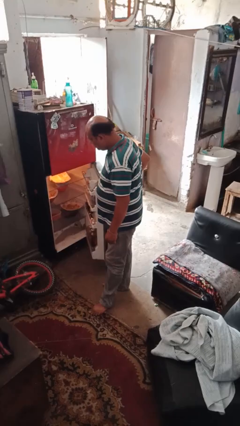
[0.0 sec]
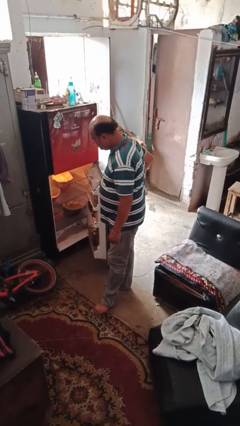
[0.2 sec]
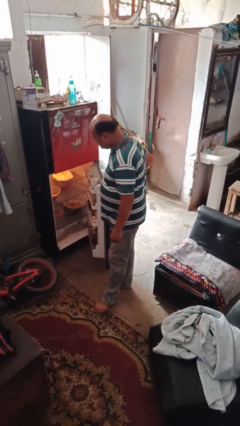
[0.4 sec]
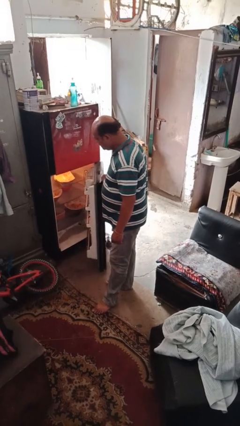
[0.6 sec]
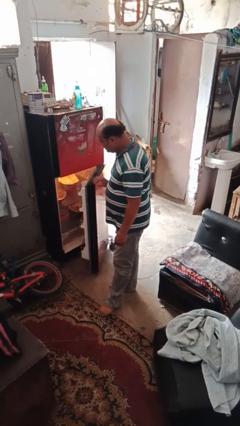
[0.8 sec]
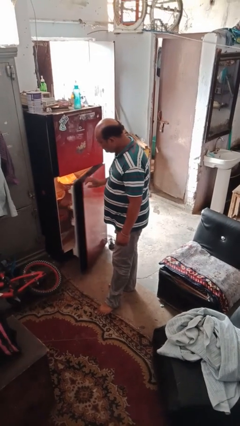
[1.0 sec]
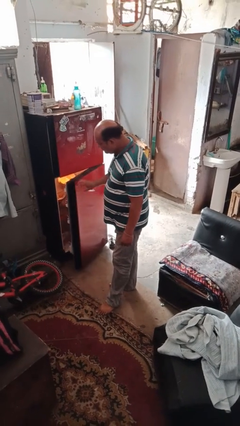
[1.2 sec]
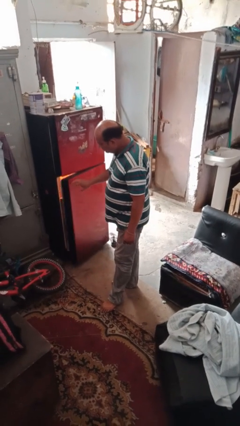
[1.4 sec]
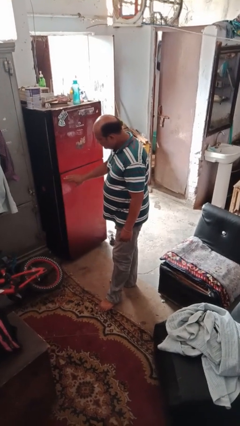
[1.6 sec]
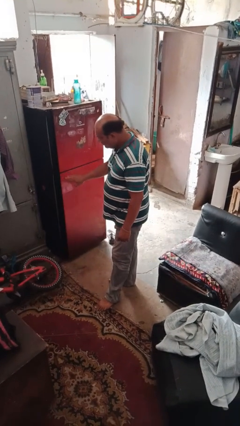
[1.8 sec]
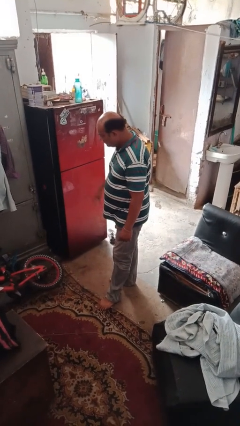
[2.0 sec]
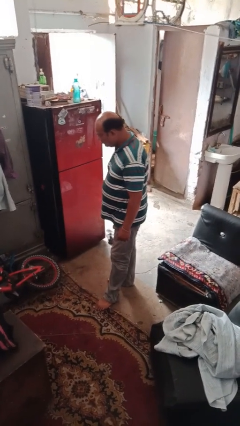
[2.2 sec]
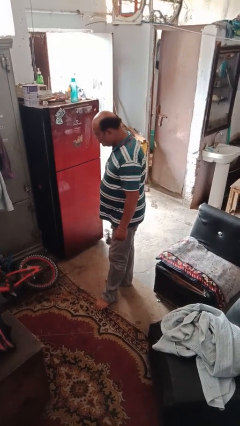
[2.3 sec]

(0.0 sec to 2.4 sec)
person closes refrigerator

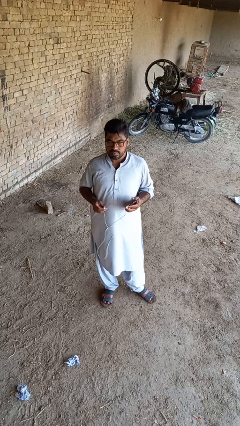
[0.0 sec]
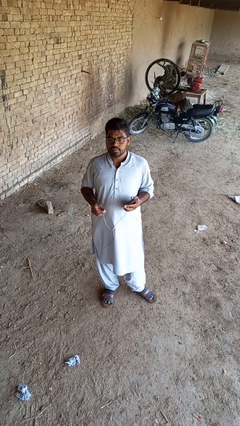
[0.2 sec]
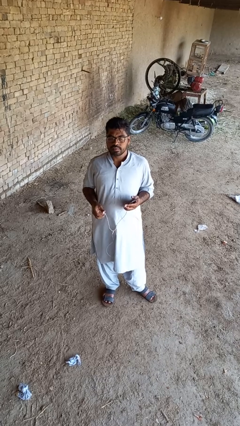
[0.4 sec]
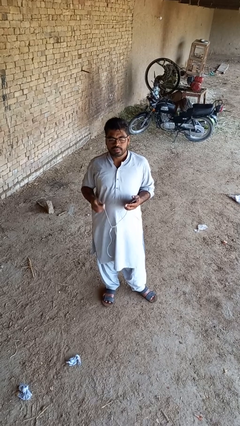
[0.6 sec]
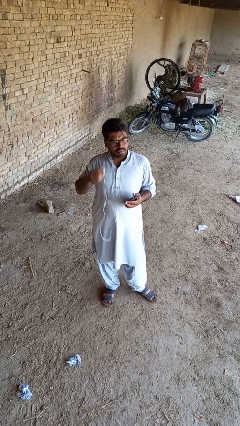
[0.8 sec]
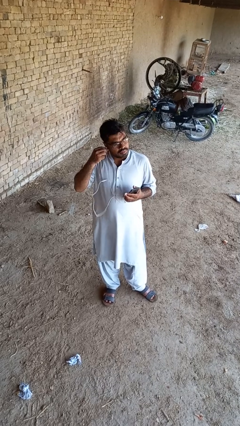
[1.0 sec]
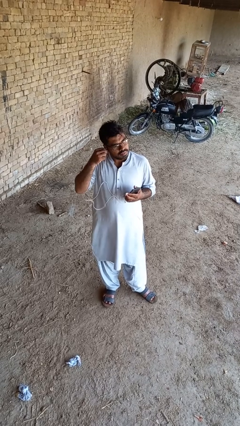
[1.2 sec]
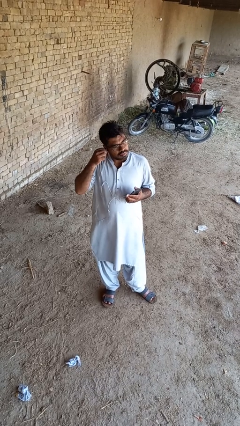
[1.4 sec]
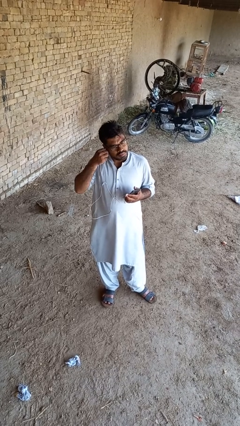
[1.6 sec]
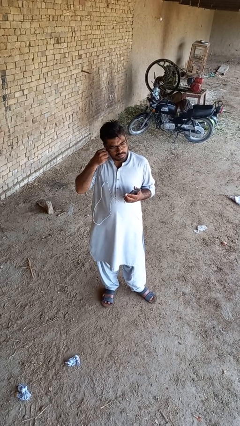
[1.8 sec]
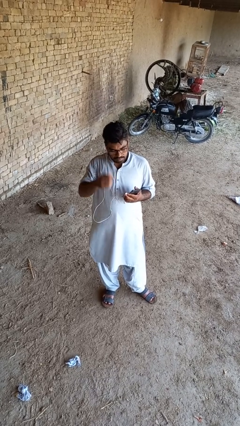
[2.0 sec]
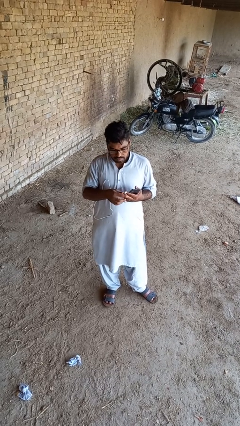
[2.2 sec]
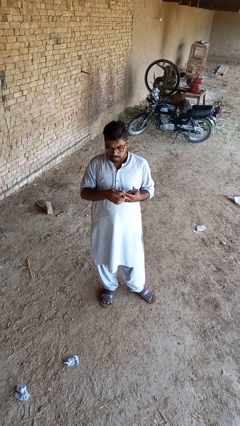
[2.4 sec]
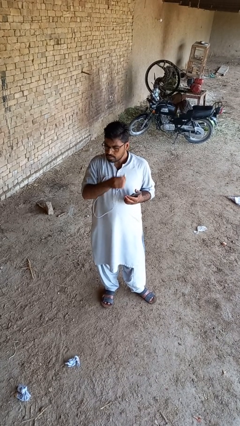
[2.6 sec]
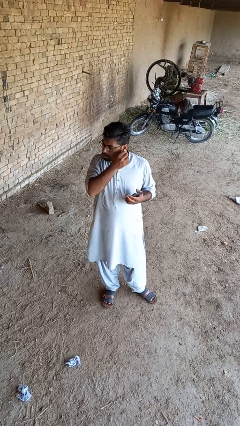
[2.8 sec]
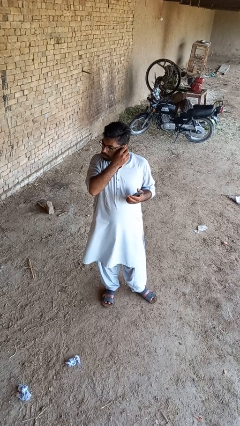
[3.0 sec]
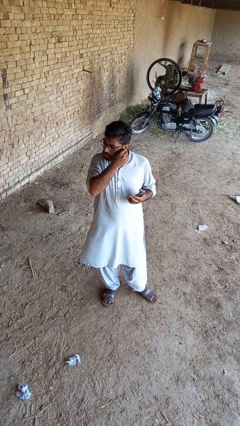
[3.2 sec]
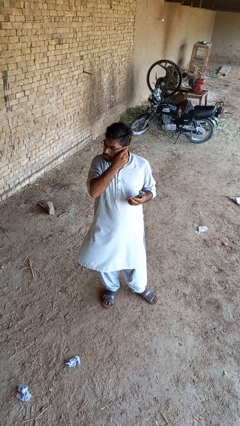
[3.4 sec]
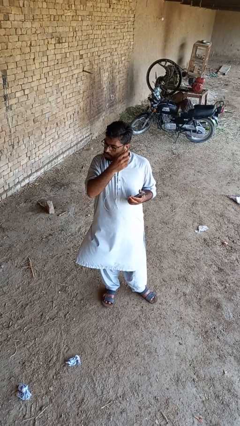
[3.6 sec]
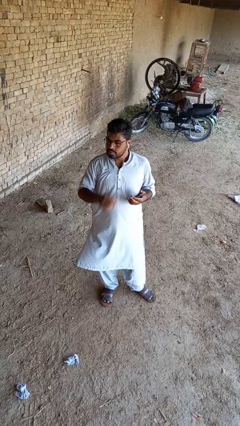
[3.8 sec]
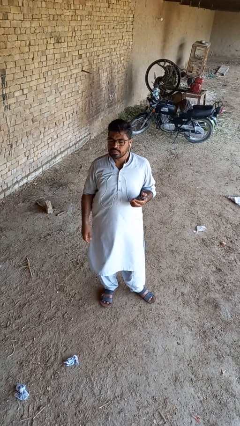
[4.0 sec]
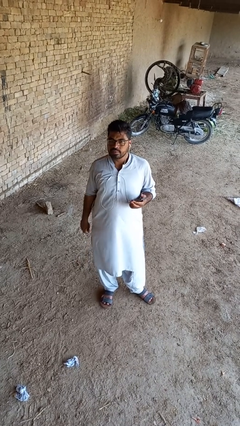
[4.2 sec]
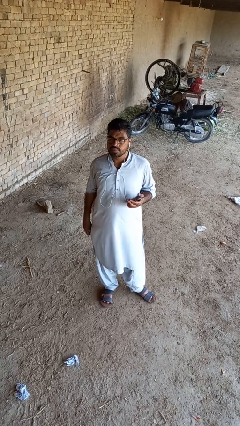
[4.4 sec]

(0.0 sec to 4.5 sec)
person puts on headphones

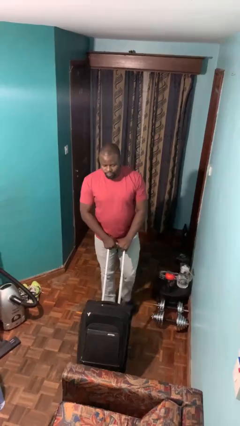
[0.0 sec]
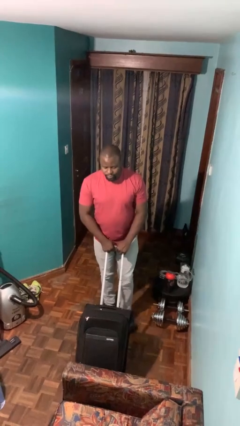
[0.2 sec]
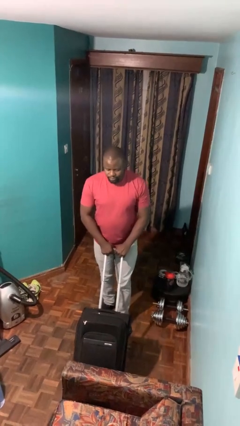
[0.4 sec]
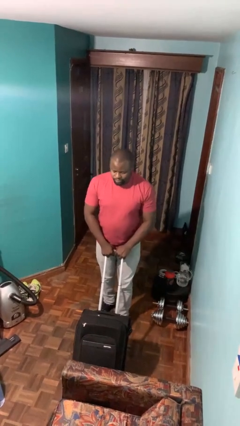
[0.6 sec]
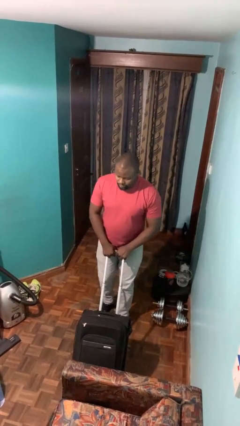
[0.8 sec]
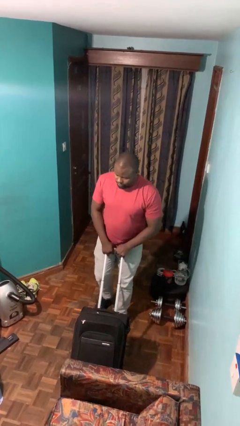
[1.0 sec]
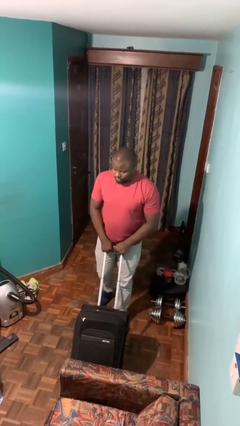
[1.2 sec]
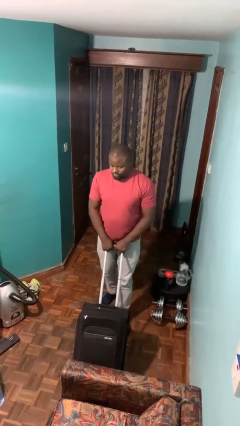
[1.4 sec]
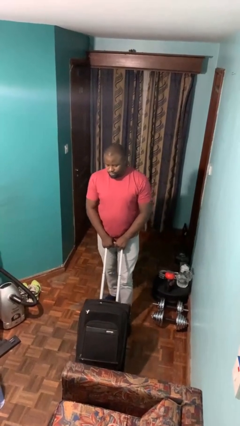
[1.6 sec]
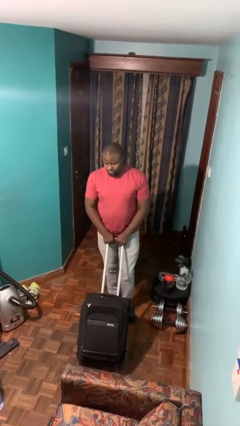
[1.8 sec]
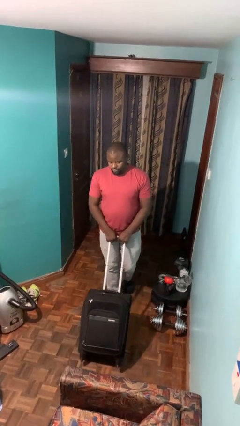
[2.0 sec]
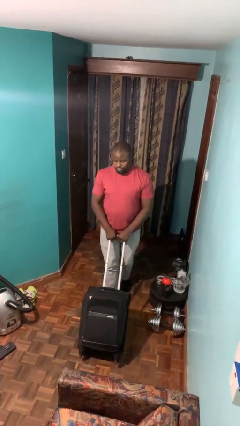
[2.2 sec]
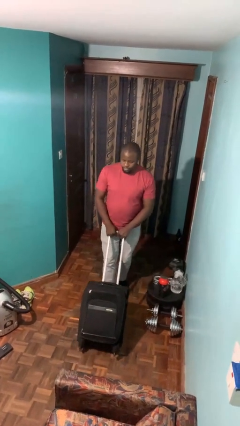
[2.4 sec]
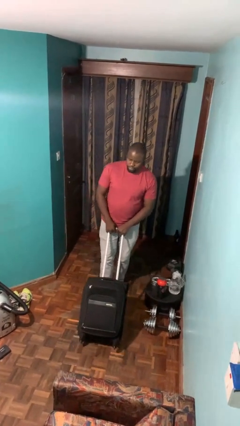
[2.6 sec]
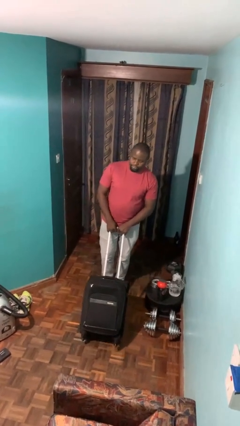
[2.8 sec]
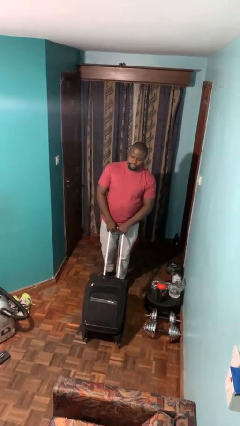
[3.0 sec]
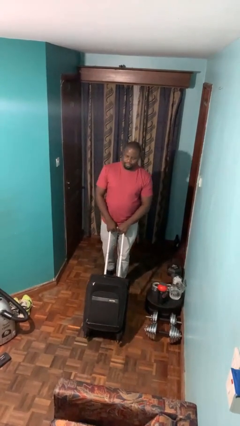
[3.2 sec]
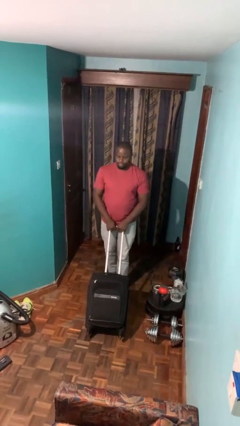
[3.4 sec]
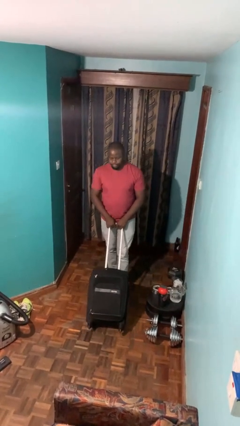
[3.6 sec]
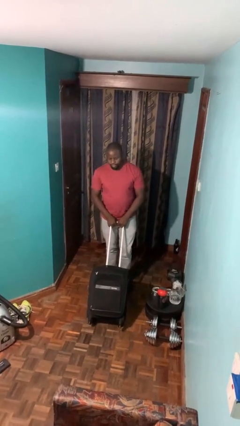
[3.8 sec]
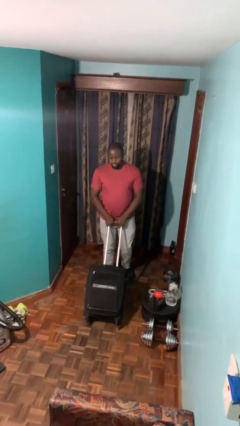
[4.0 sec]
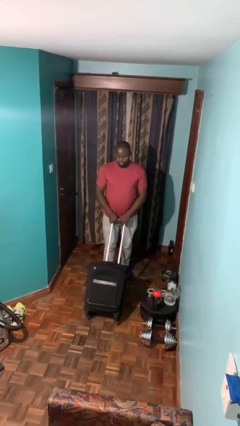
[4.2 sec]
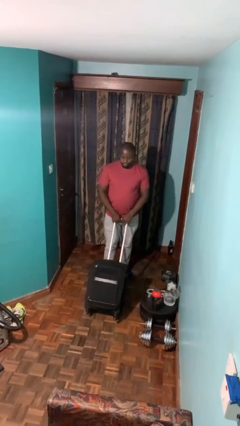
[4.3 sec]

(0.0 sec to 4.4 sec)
person pulls wheeled cart

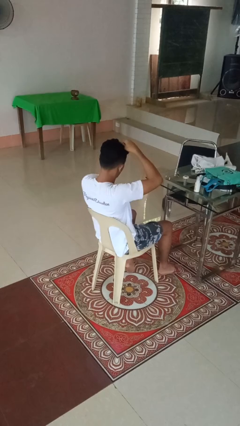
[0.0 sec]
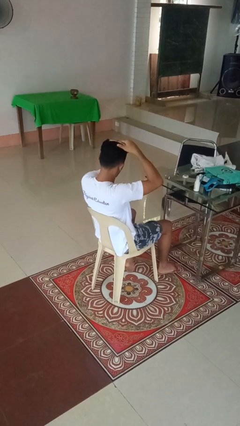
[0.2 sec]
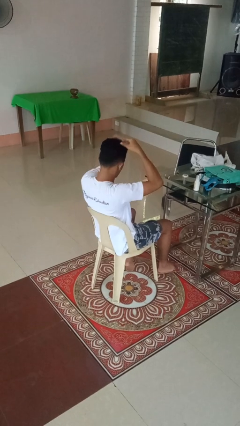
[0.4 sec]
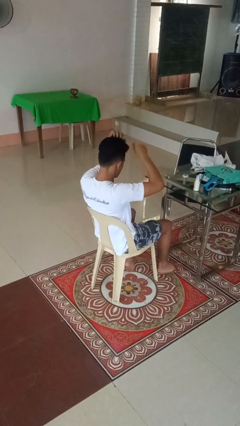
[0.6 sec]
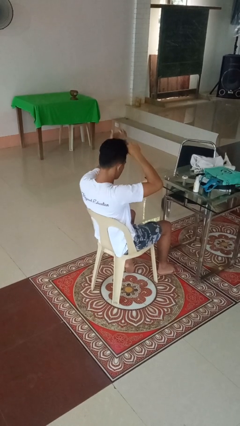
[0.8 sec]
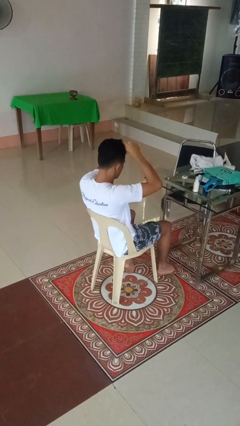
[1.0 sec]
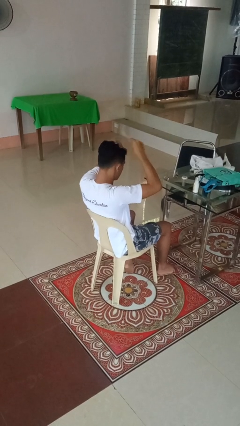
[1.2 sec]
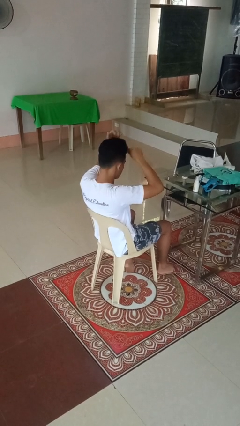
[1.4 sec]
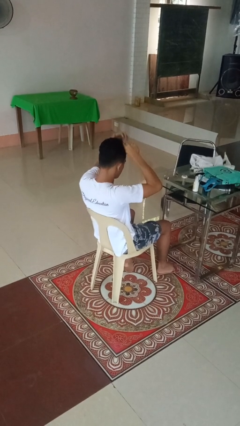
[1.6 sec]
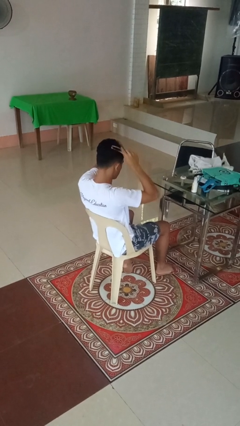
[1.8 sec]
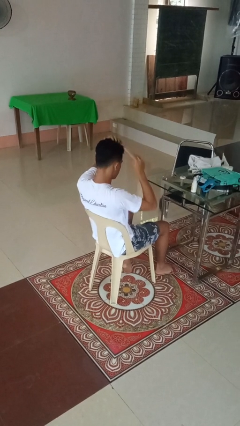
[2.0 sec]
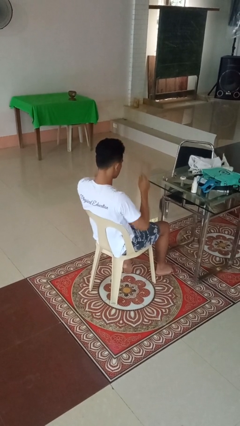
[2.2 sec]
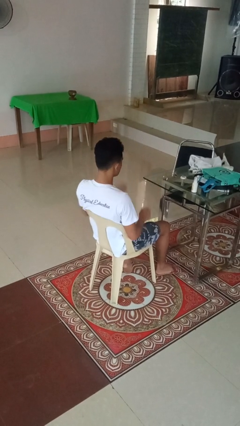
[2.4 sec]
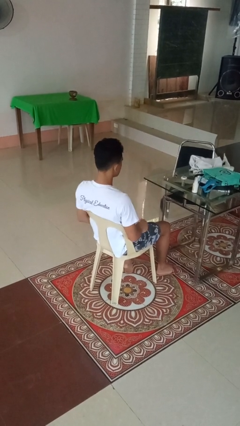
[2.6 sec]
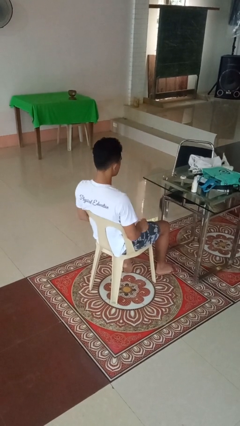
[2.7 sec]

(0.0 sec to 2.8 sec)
person brushes hair

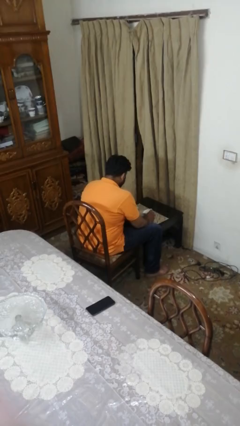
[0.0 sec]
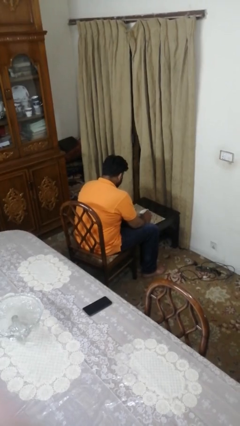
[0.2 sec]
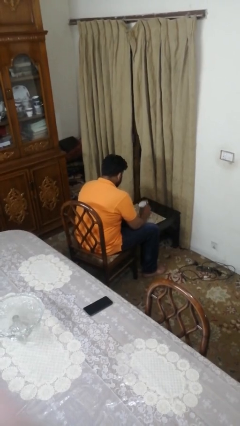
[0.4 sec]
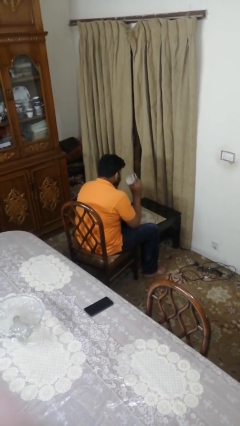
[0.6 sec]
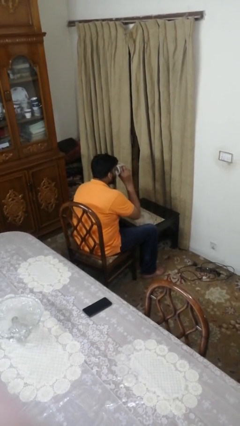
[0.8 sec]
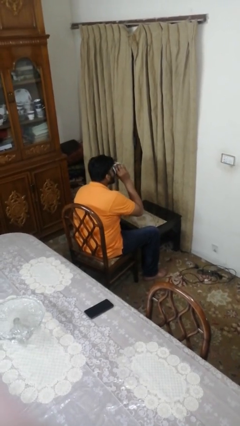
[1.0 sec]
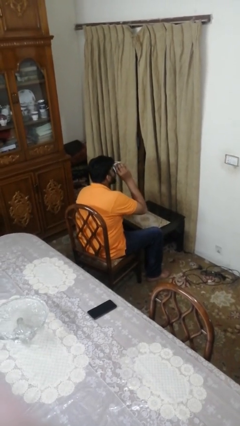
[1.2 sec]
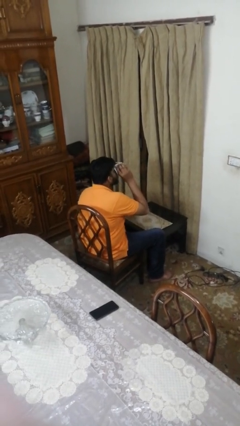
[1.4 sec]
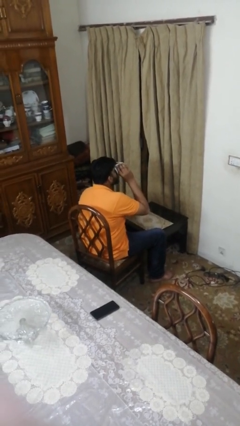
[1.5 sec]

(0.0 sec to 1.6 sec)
person drinks from mug

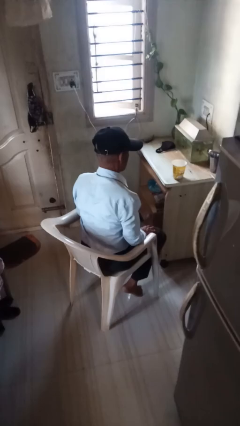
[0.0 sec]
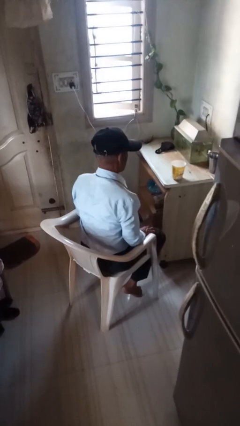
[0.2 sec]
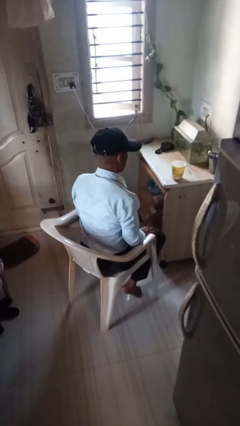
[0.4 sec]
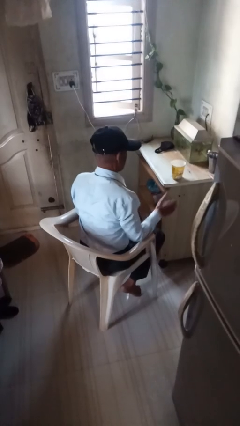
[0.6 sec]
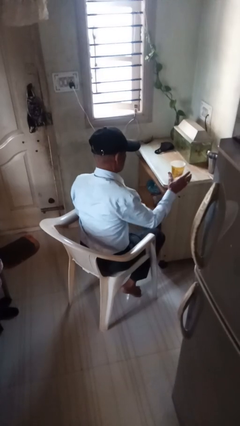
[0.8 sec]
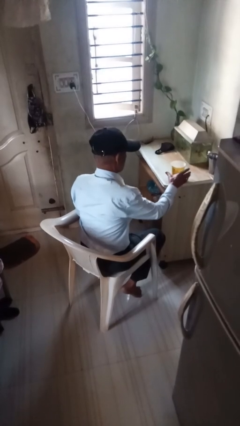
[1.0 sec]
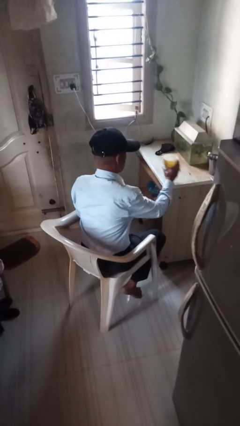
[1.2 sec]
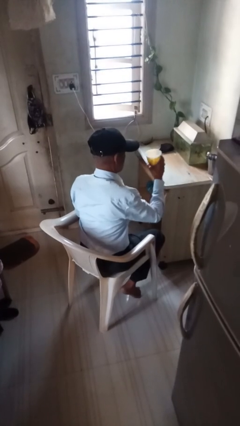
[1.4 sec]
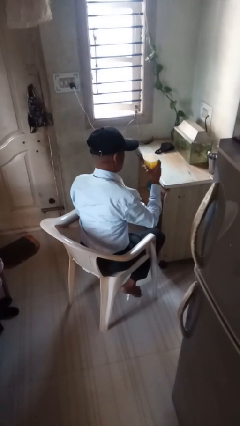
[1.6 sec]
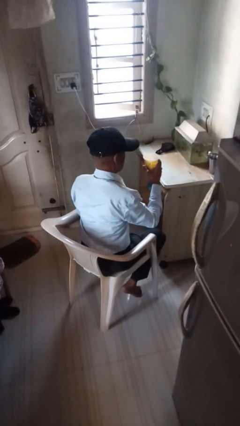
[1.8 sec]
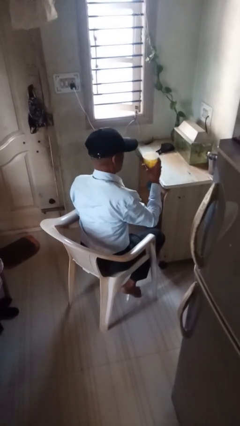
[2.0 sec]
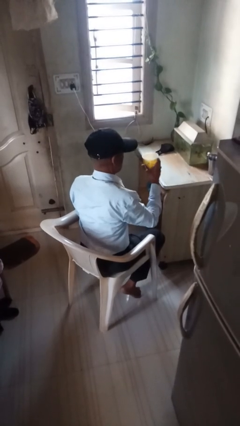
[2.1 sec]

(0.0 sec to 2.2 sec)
person picks up object from table
